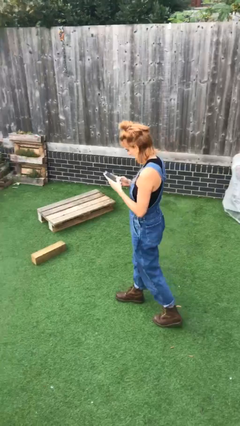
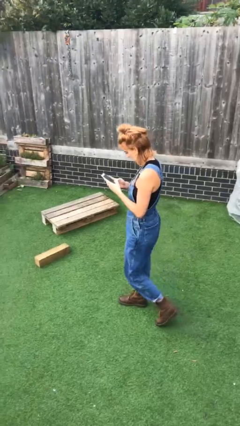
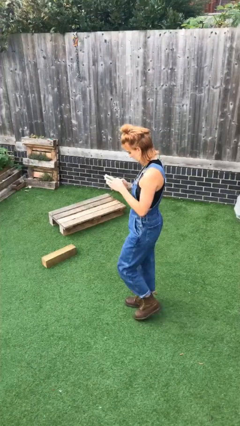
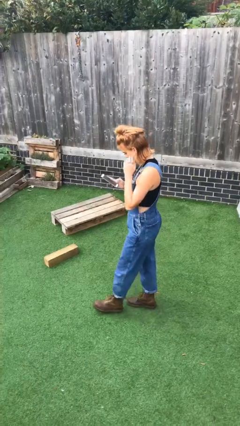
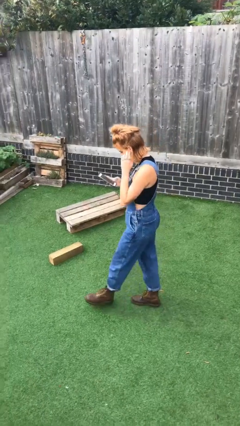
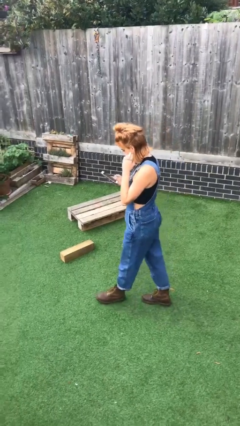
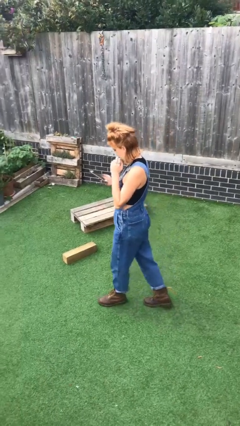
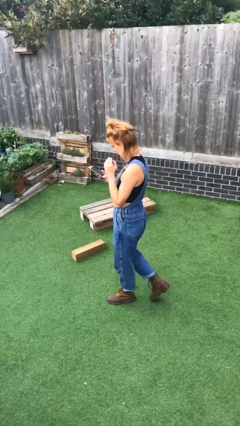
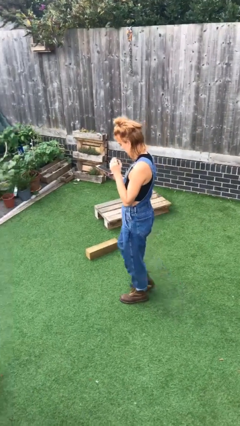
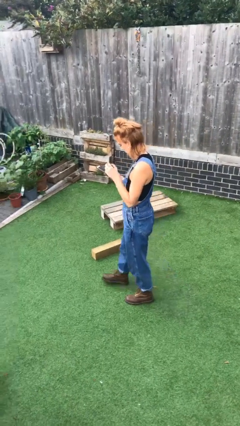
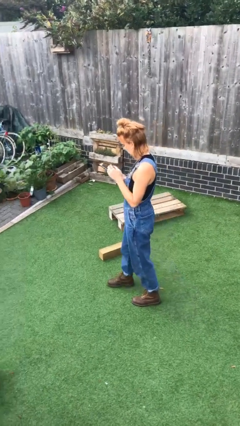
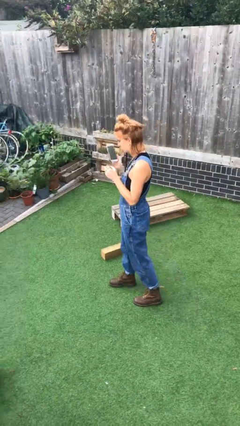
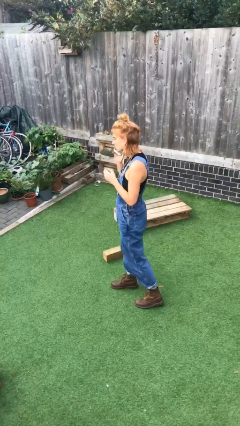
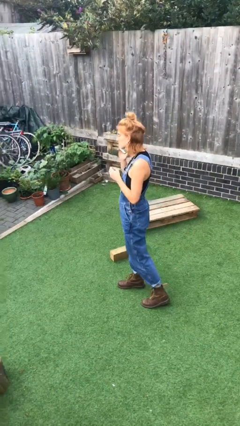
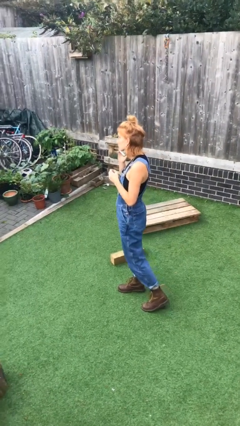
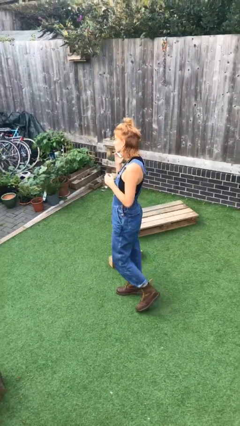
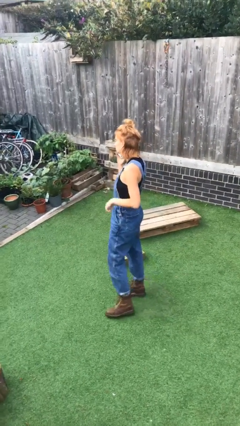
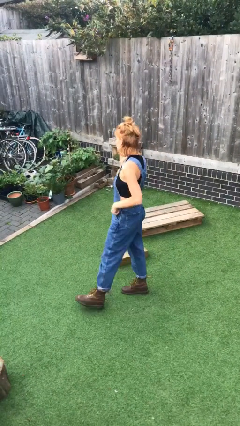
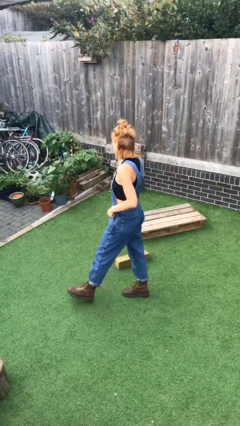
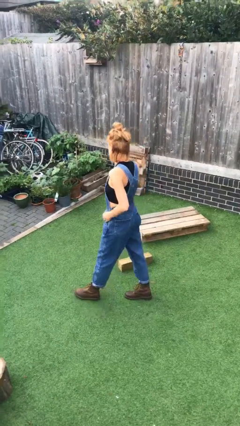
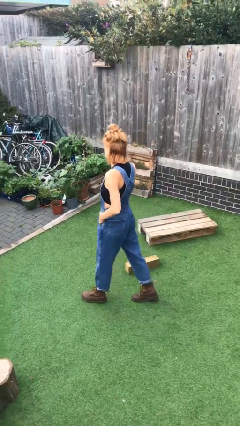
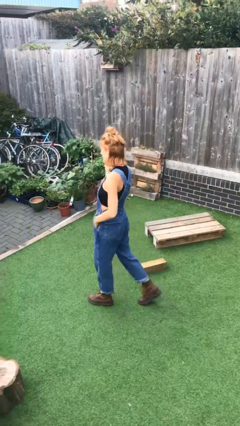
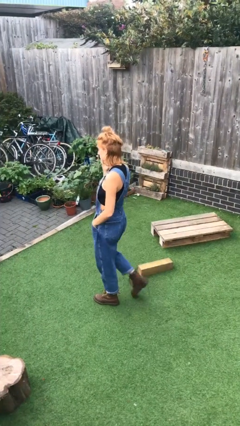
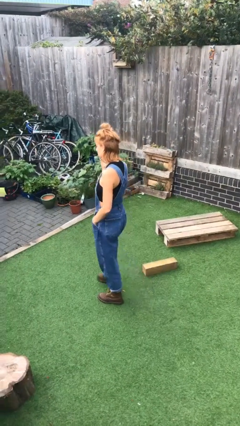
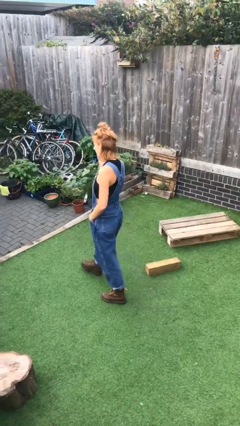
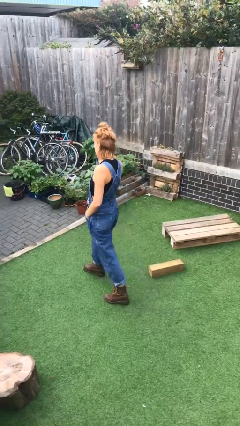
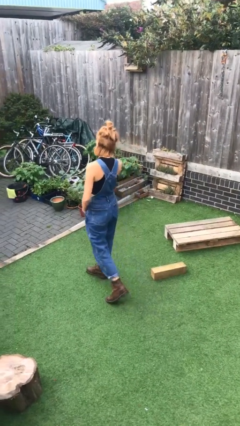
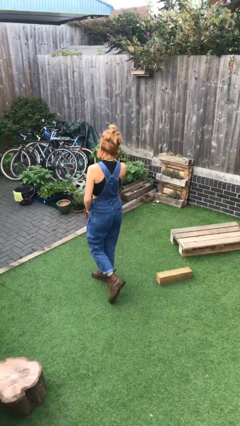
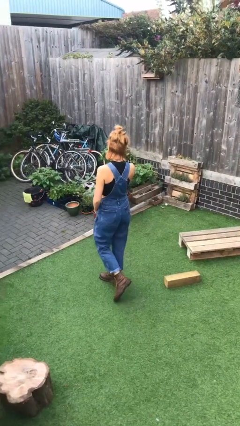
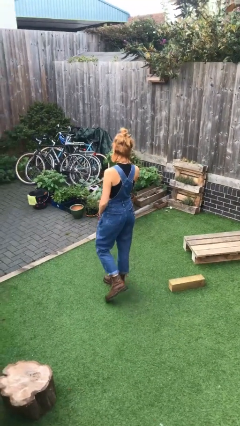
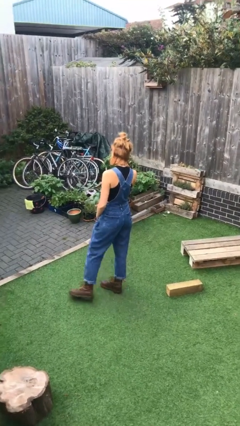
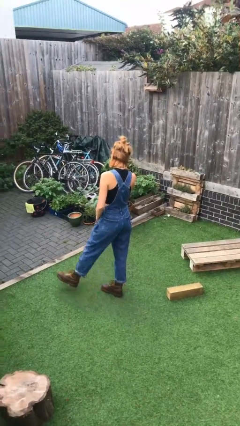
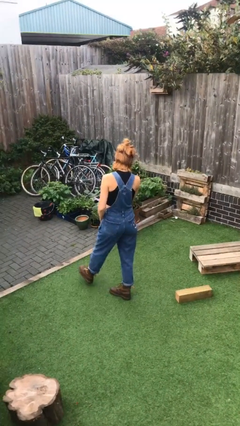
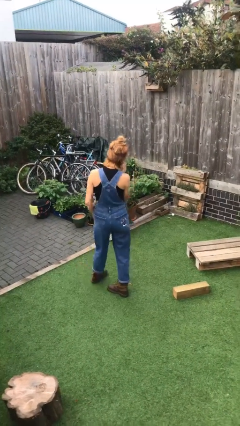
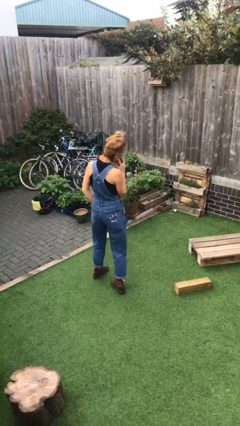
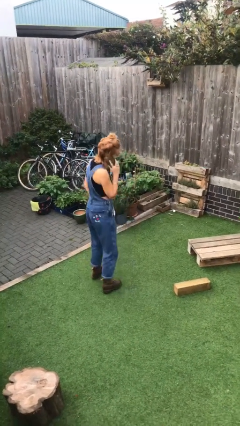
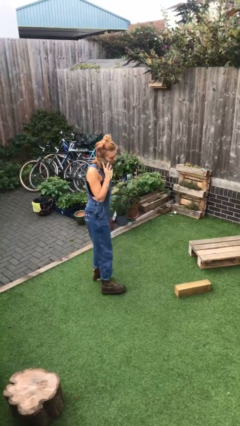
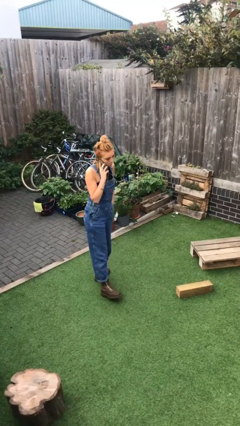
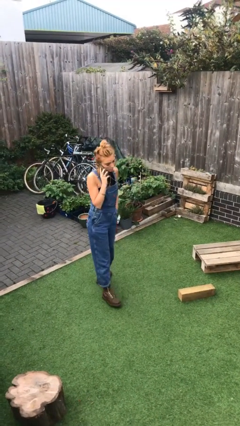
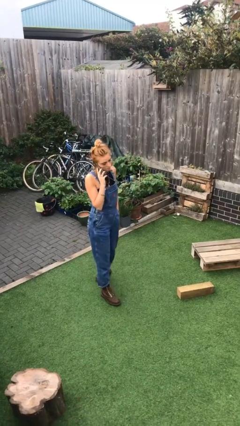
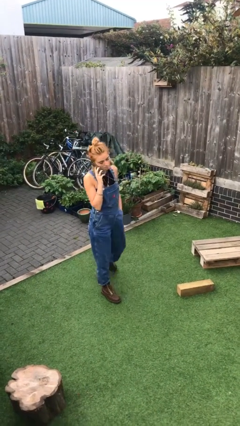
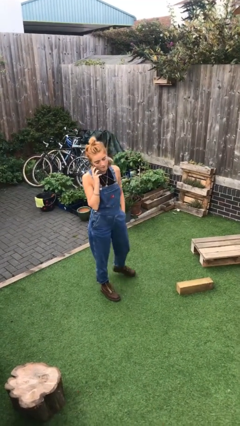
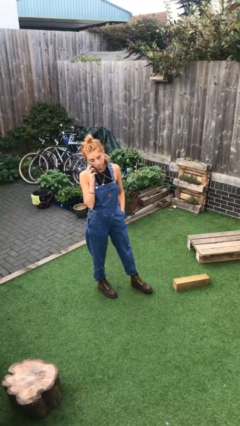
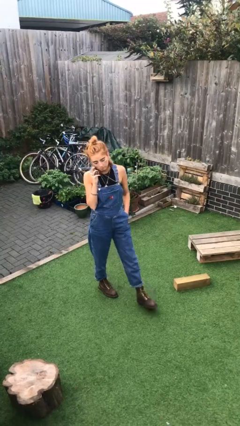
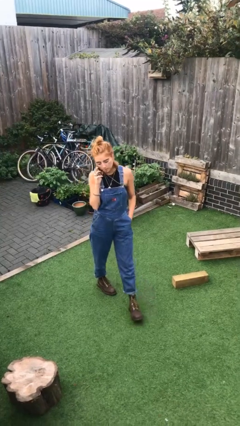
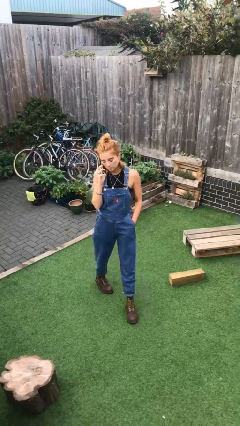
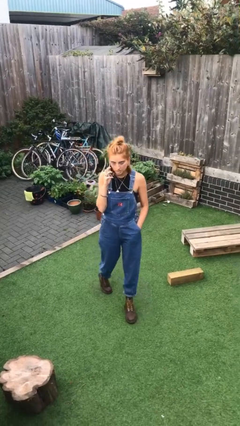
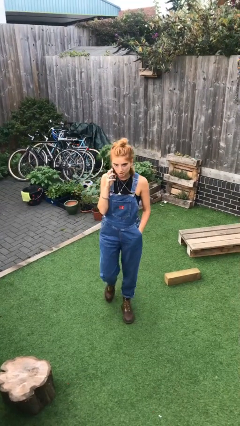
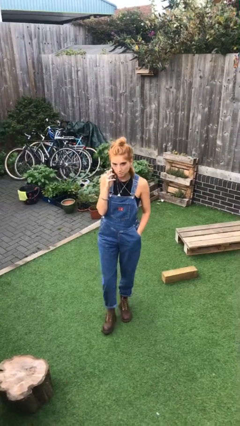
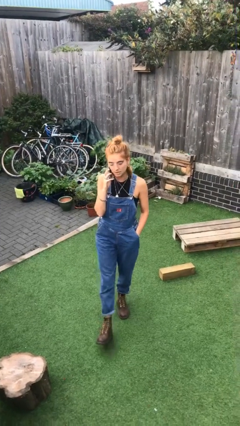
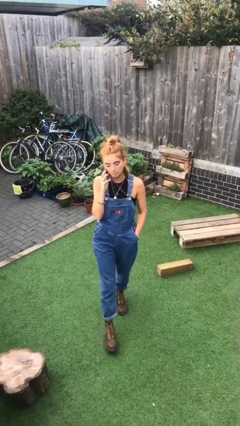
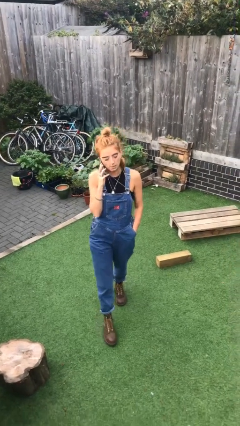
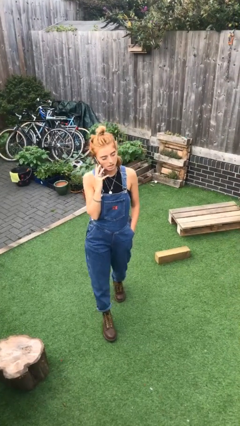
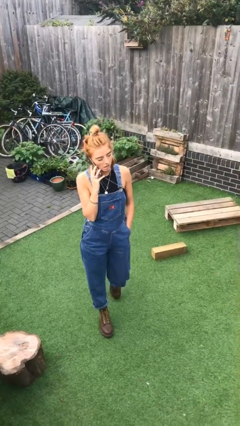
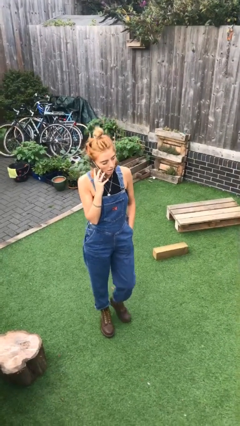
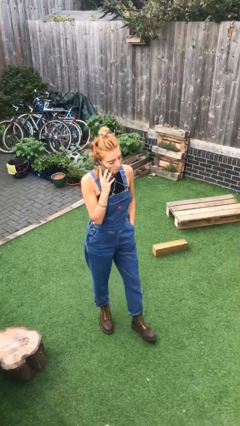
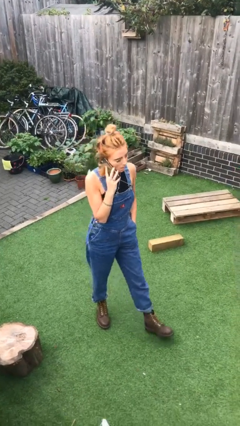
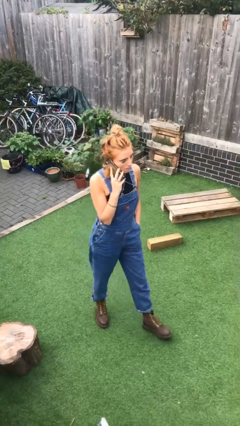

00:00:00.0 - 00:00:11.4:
person talks on phone

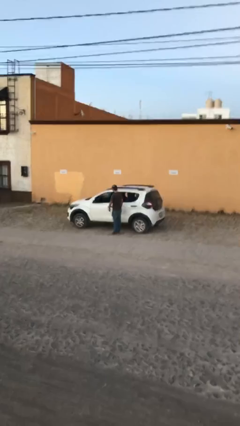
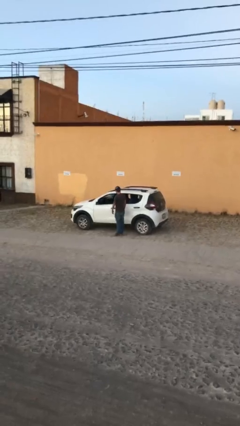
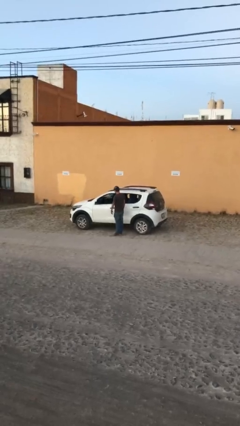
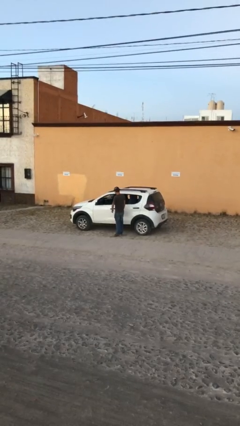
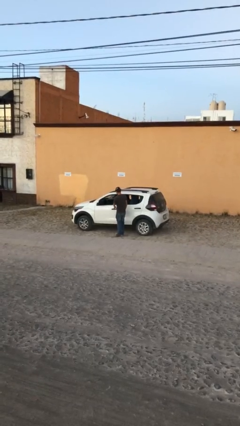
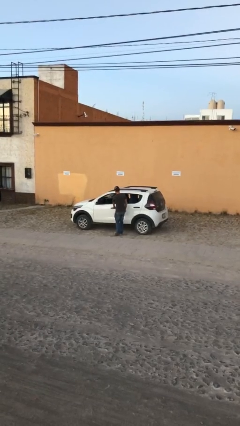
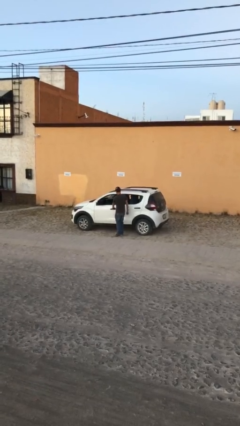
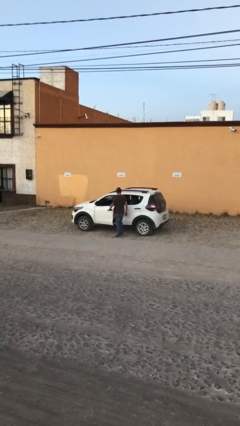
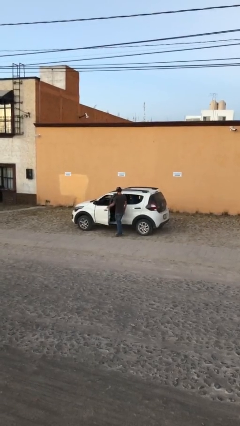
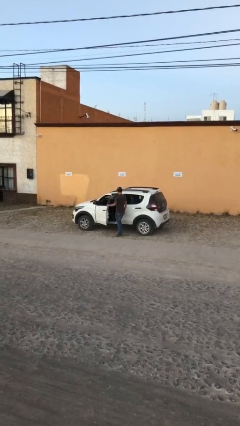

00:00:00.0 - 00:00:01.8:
person opens car door

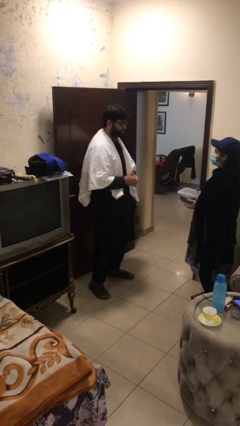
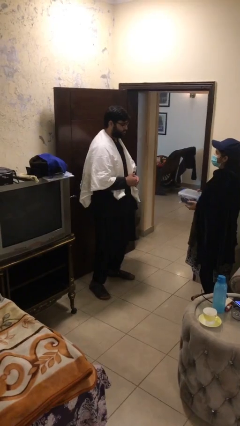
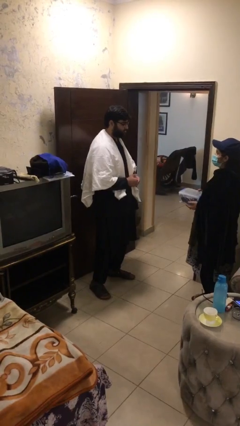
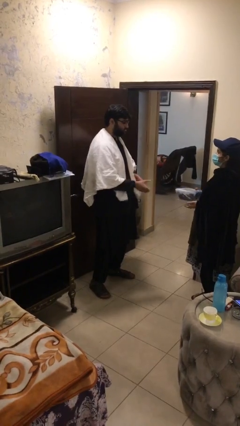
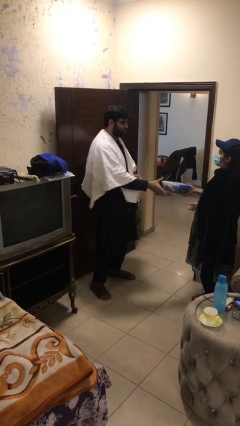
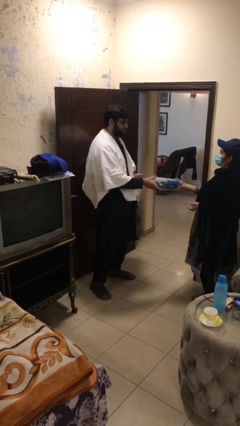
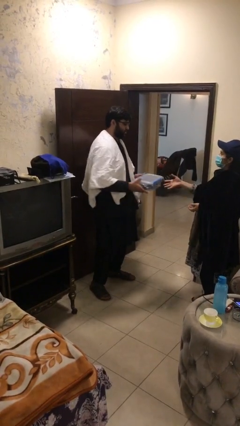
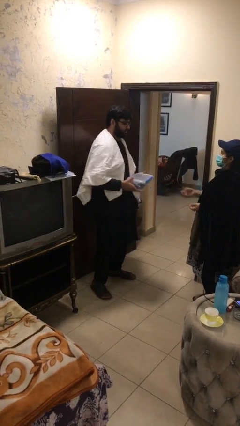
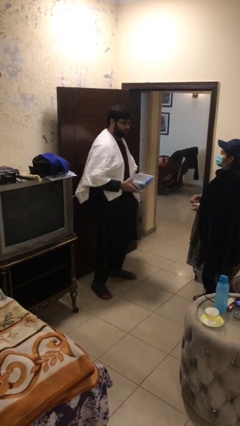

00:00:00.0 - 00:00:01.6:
person transfers object to person

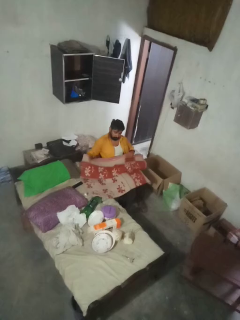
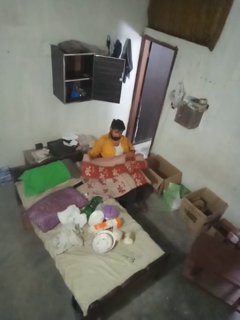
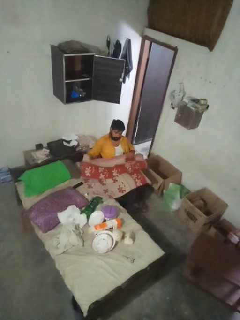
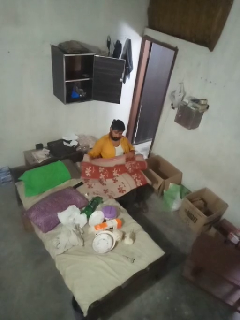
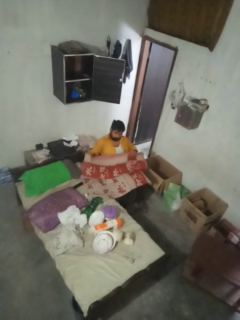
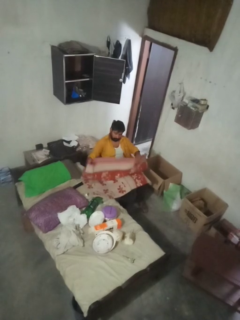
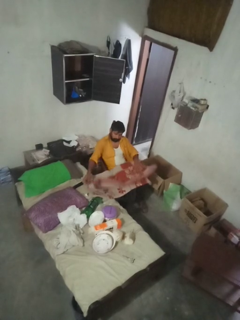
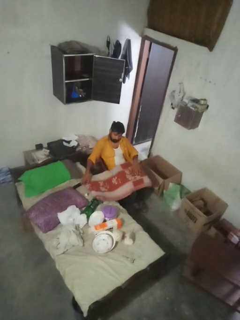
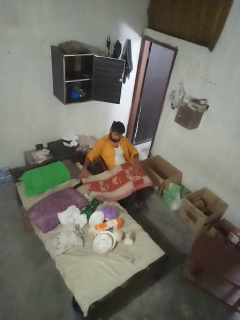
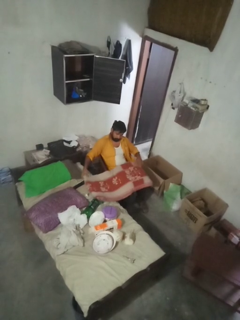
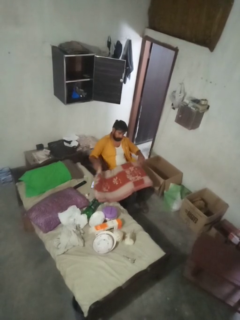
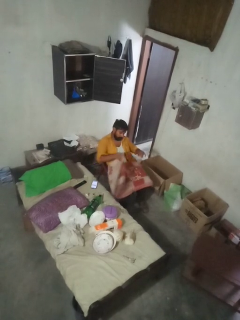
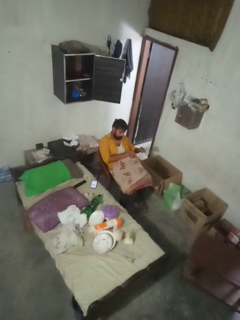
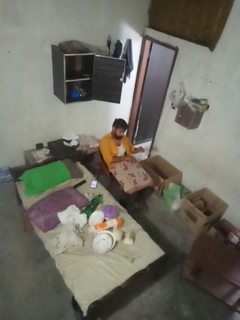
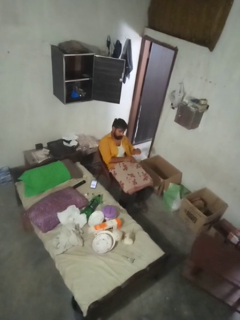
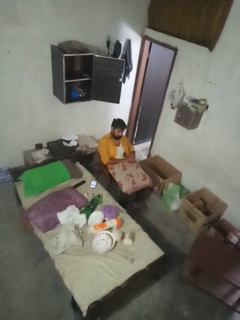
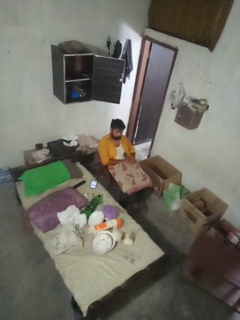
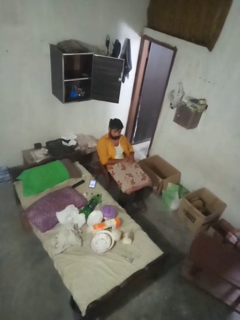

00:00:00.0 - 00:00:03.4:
person folds blanket

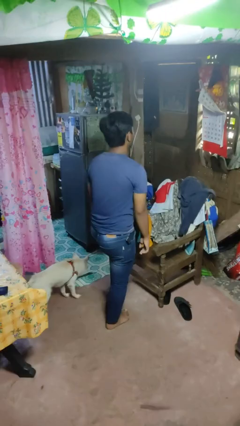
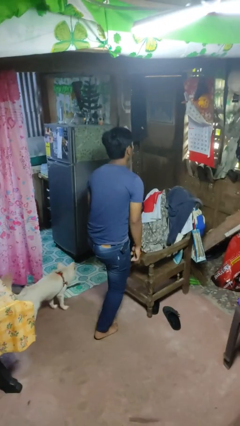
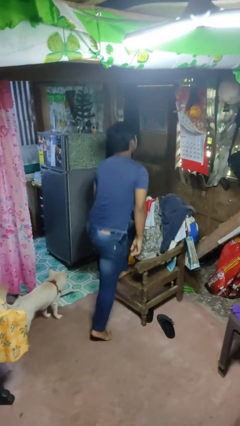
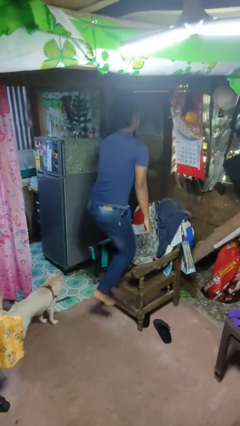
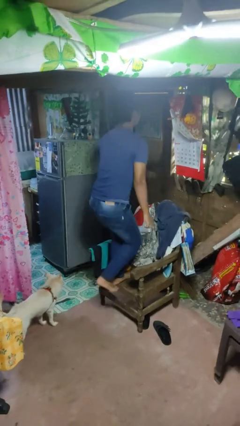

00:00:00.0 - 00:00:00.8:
person climbs on chair
